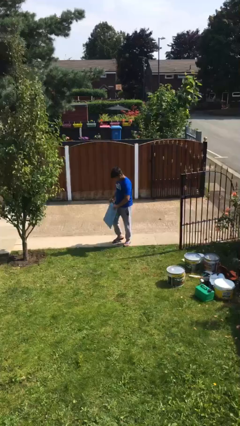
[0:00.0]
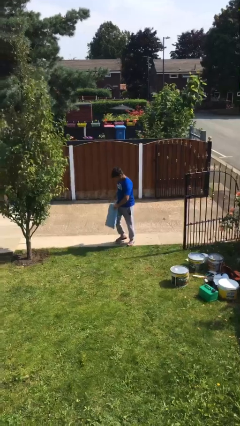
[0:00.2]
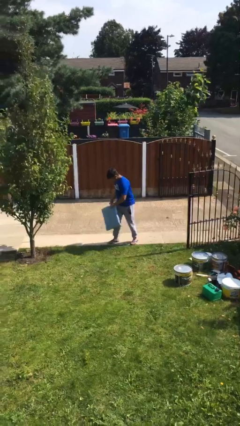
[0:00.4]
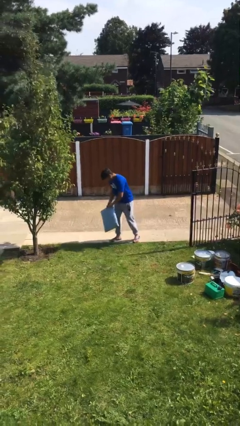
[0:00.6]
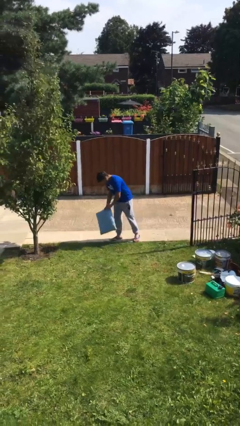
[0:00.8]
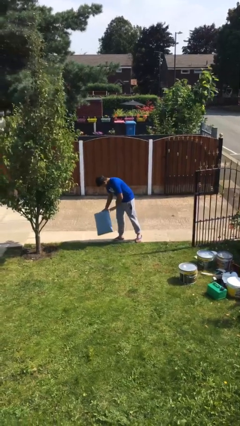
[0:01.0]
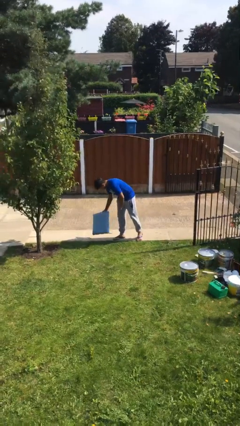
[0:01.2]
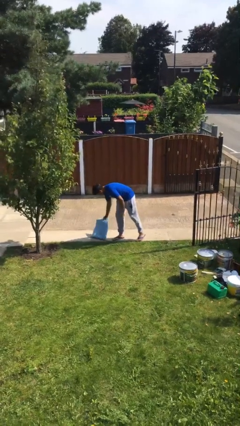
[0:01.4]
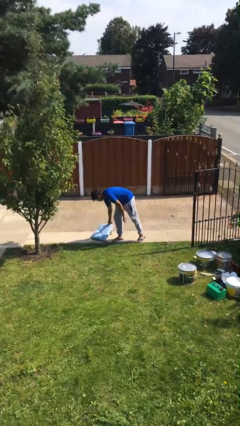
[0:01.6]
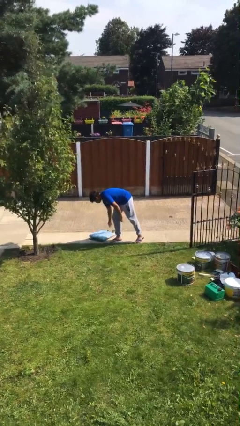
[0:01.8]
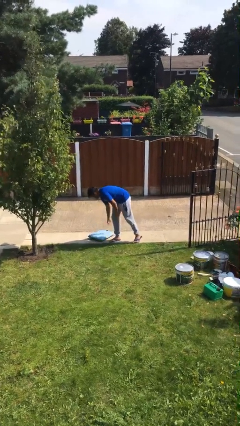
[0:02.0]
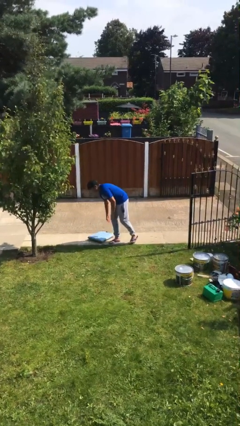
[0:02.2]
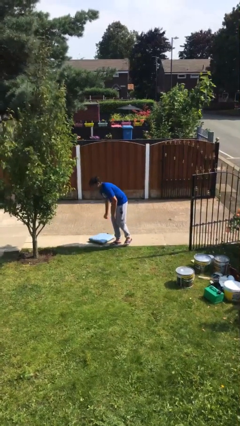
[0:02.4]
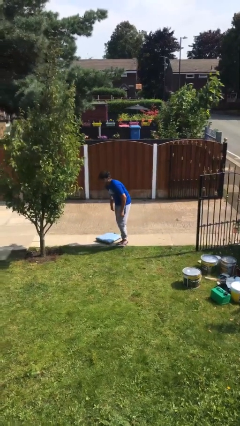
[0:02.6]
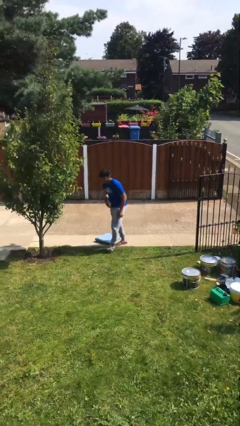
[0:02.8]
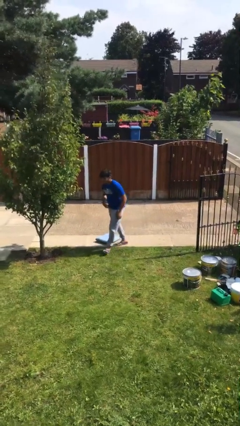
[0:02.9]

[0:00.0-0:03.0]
person puts down object on floor

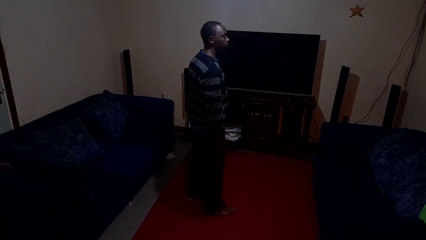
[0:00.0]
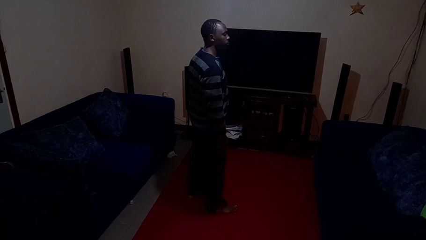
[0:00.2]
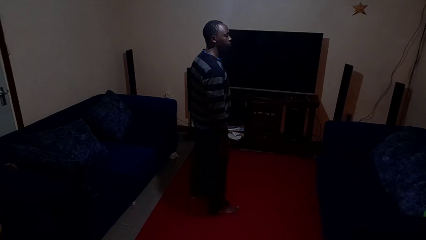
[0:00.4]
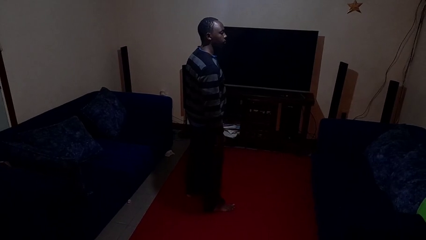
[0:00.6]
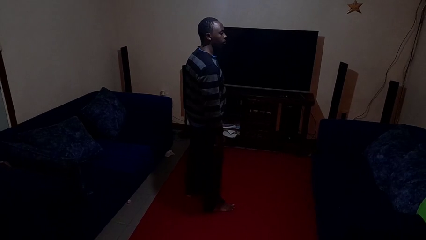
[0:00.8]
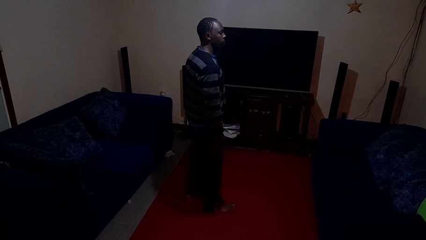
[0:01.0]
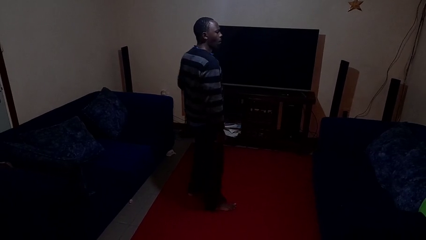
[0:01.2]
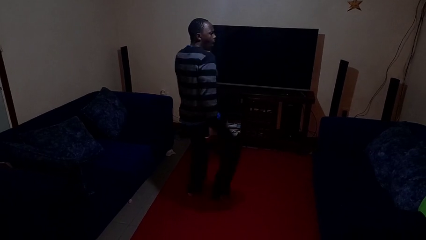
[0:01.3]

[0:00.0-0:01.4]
person crosses arms

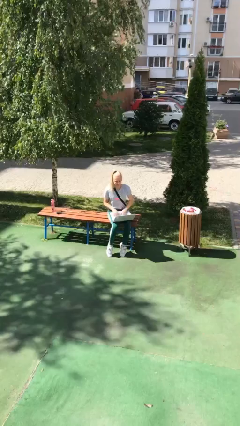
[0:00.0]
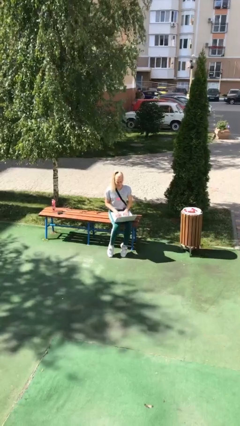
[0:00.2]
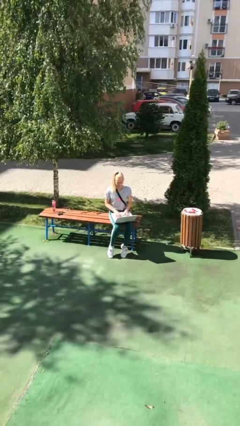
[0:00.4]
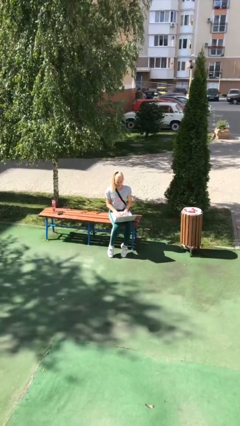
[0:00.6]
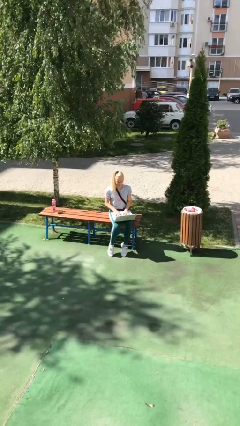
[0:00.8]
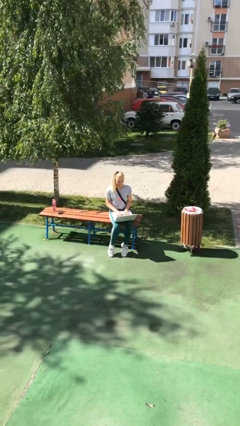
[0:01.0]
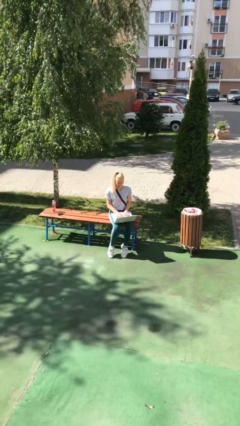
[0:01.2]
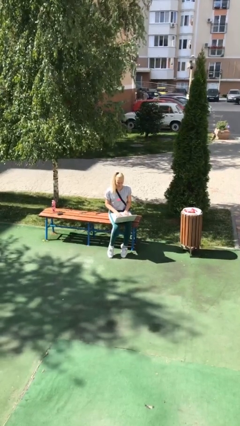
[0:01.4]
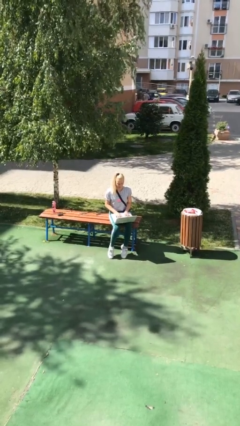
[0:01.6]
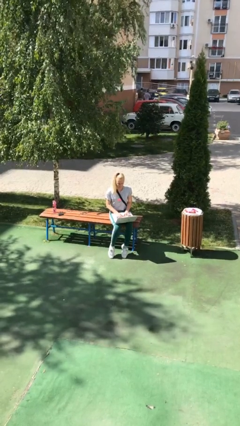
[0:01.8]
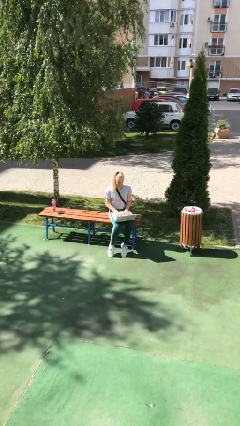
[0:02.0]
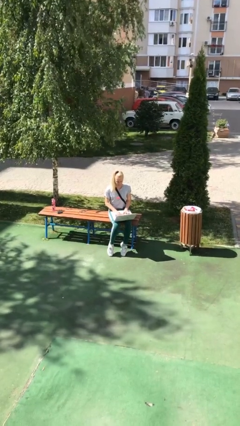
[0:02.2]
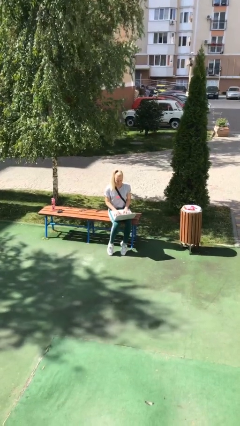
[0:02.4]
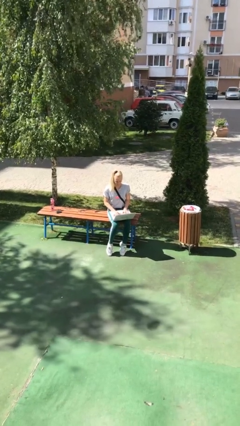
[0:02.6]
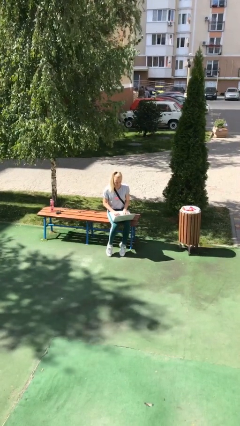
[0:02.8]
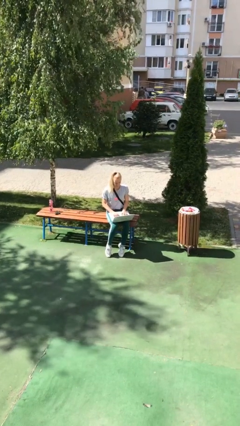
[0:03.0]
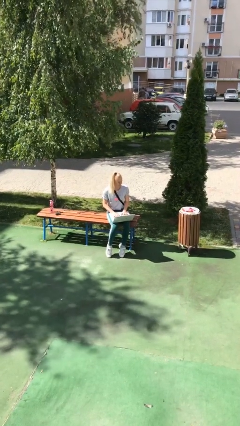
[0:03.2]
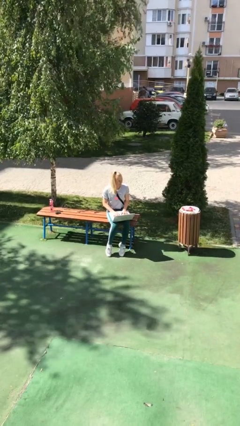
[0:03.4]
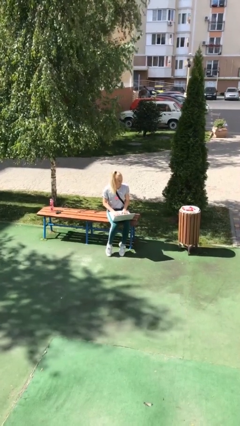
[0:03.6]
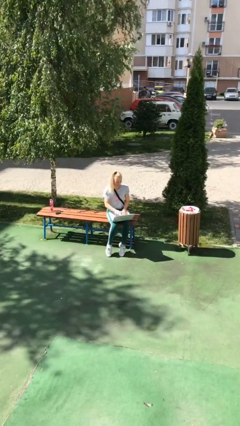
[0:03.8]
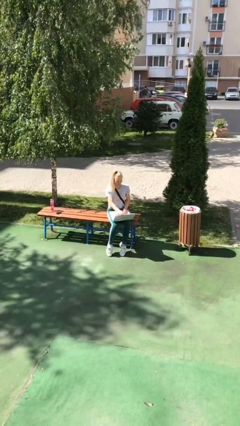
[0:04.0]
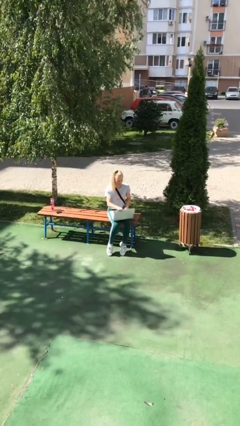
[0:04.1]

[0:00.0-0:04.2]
person interacts with laptop

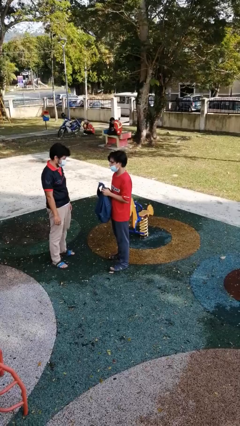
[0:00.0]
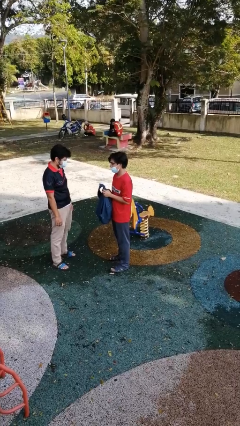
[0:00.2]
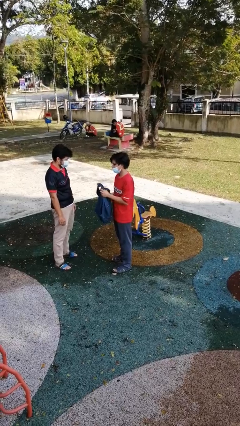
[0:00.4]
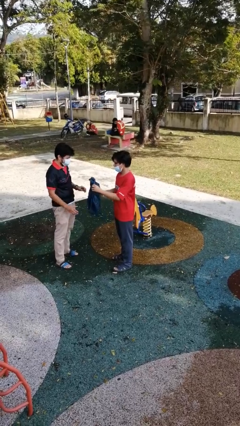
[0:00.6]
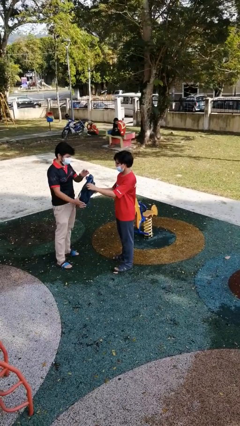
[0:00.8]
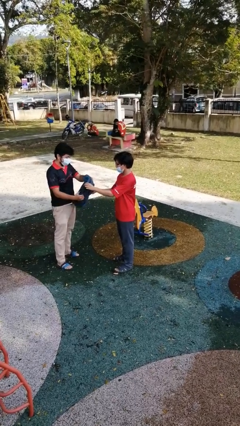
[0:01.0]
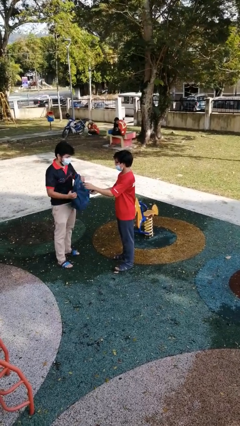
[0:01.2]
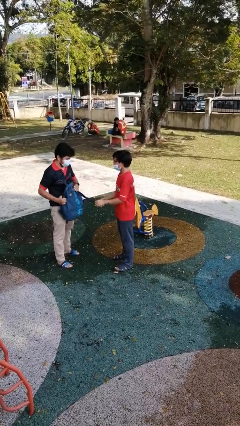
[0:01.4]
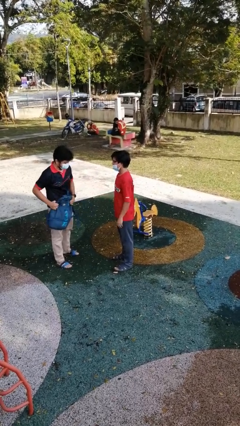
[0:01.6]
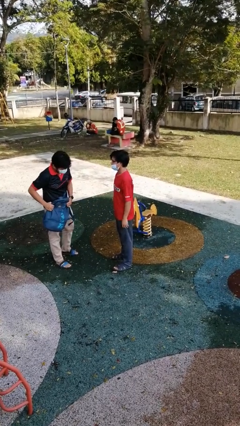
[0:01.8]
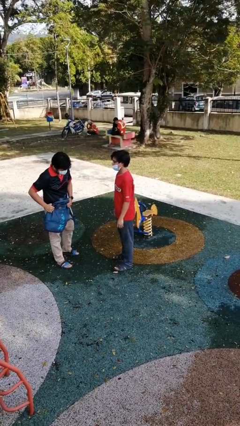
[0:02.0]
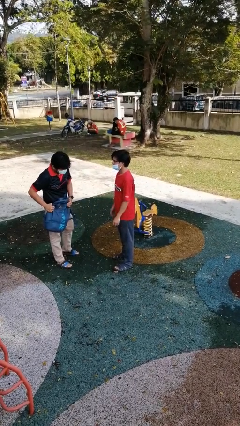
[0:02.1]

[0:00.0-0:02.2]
person transfers object to person

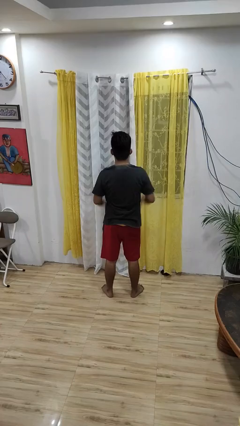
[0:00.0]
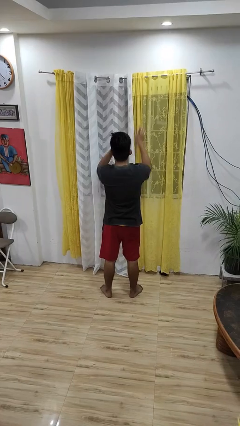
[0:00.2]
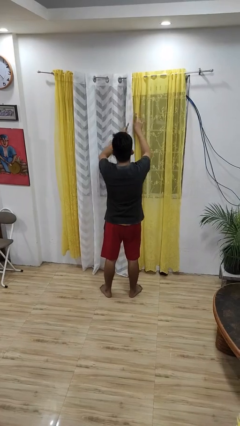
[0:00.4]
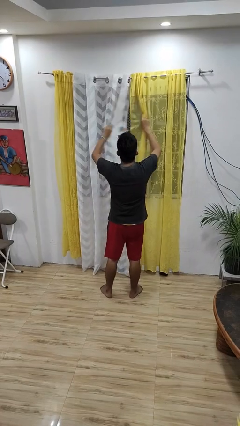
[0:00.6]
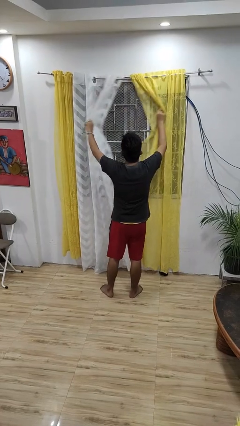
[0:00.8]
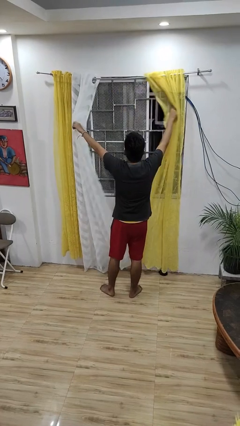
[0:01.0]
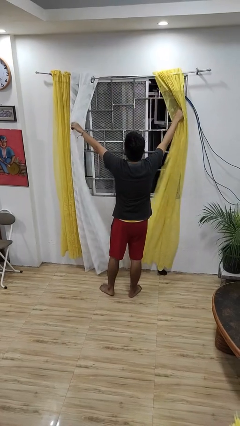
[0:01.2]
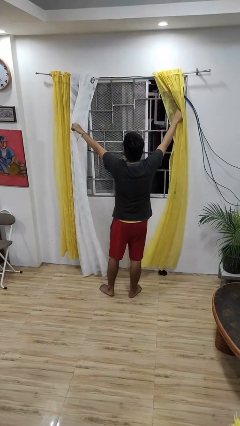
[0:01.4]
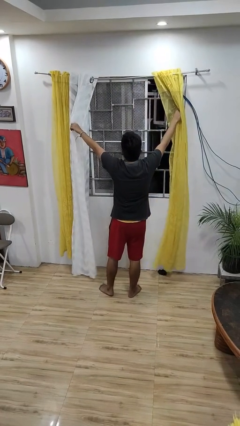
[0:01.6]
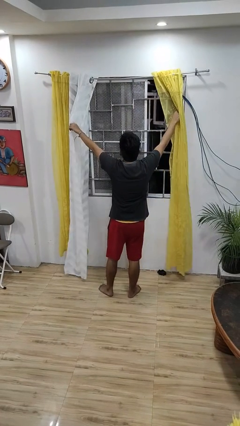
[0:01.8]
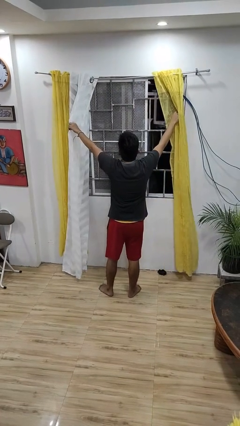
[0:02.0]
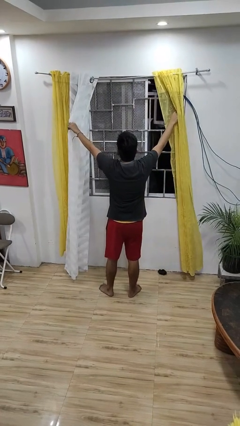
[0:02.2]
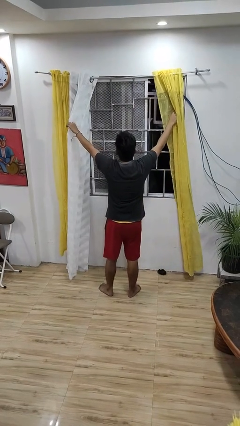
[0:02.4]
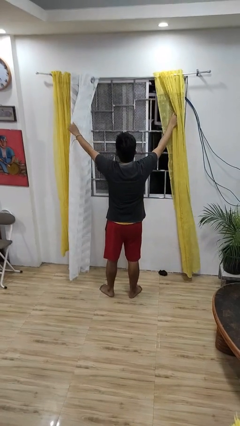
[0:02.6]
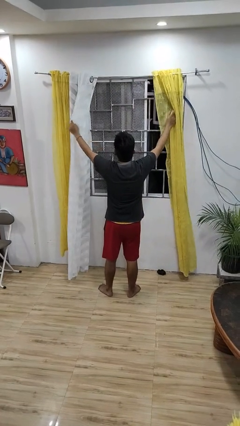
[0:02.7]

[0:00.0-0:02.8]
person opens curtains

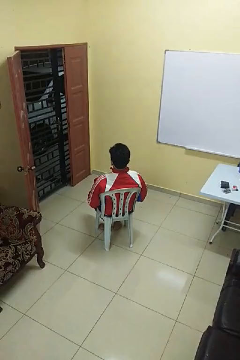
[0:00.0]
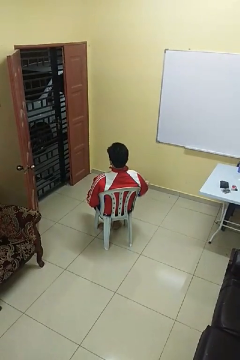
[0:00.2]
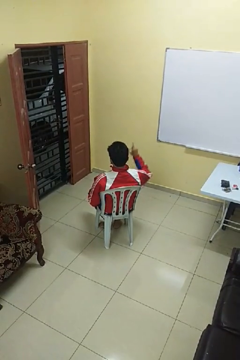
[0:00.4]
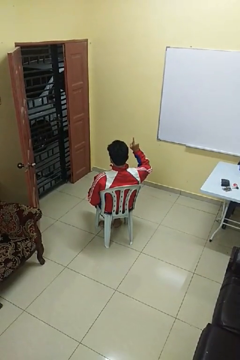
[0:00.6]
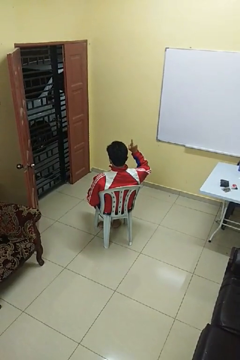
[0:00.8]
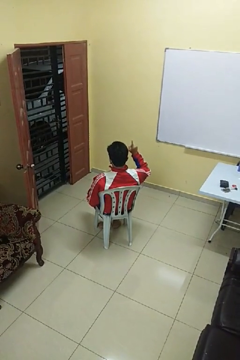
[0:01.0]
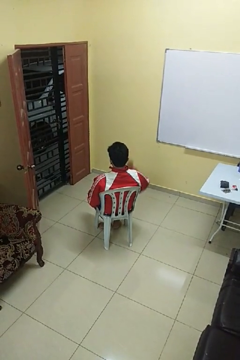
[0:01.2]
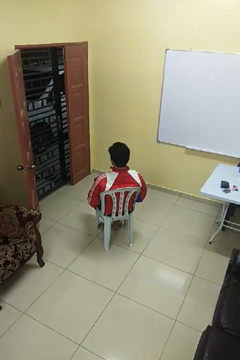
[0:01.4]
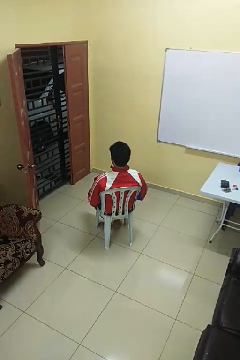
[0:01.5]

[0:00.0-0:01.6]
person gestures number one

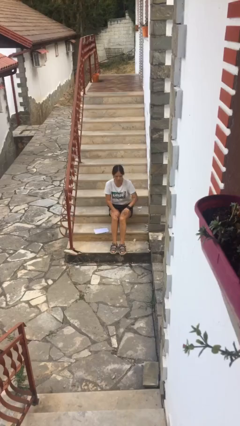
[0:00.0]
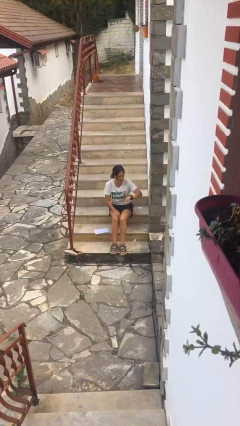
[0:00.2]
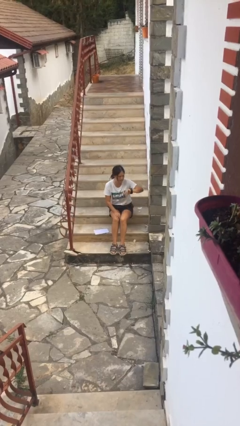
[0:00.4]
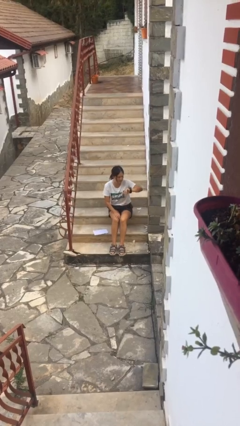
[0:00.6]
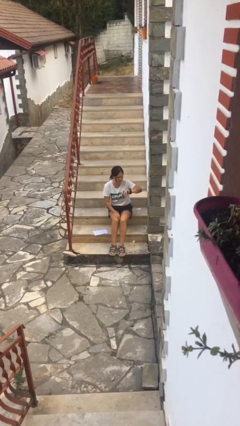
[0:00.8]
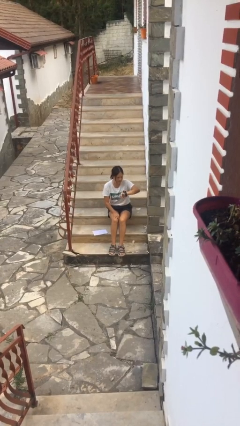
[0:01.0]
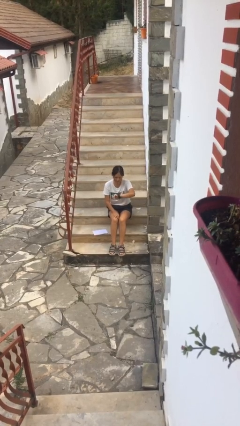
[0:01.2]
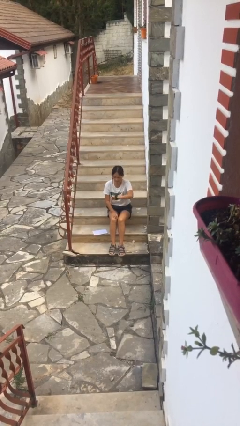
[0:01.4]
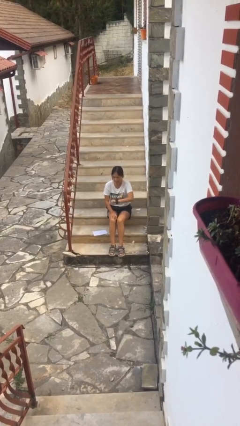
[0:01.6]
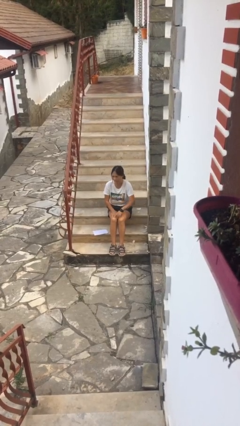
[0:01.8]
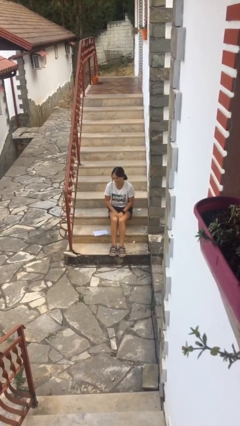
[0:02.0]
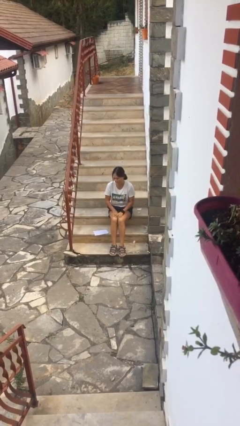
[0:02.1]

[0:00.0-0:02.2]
person looks at wristwatch
